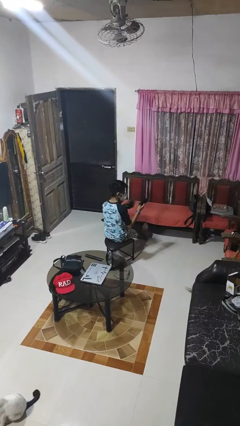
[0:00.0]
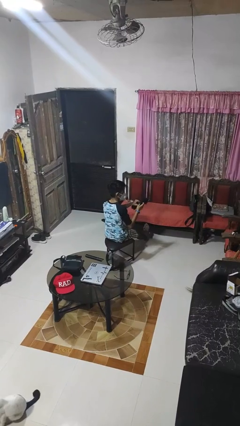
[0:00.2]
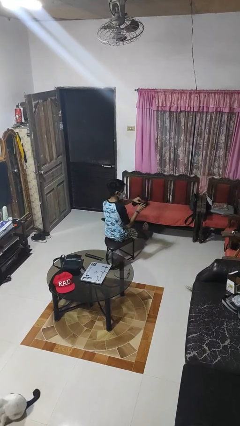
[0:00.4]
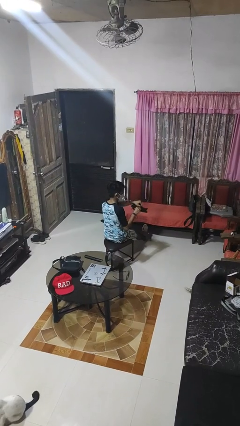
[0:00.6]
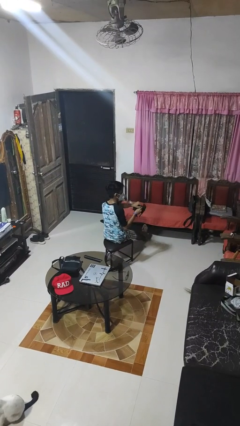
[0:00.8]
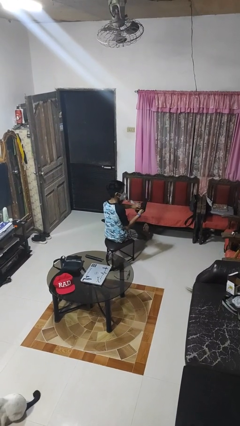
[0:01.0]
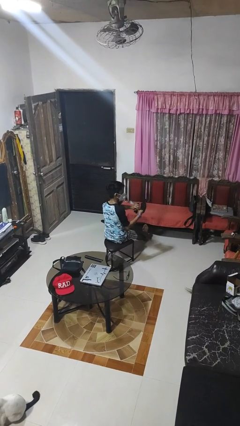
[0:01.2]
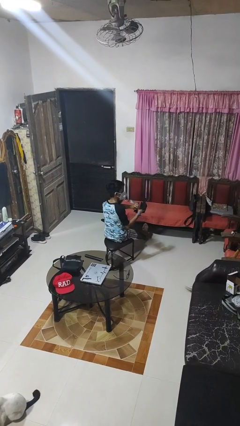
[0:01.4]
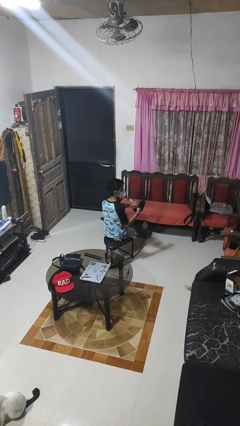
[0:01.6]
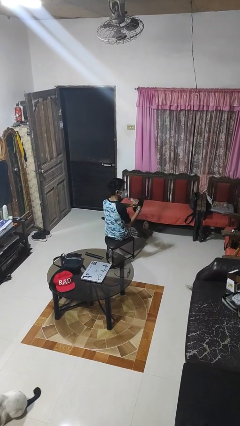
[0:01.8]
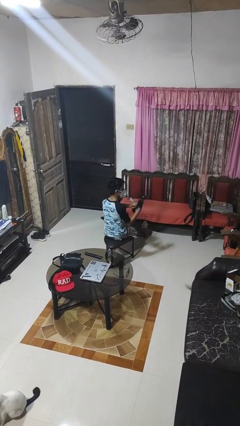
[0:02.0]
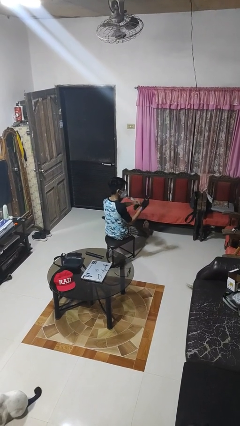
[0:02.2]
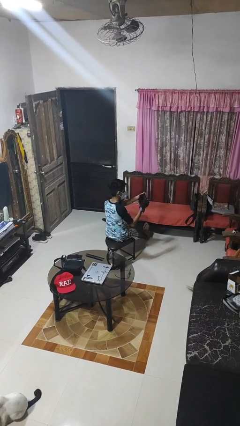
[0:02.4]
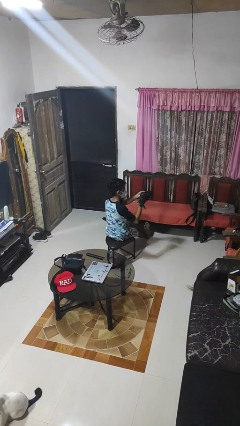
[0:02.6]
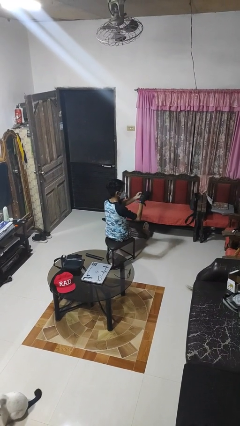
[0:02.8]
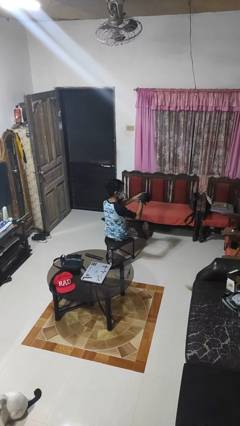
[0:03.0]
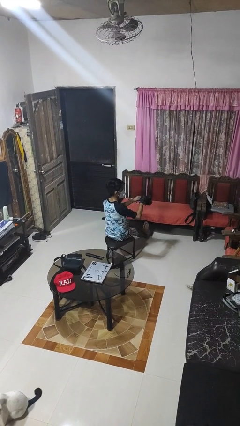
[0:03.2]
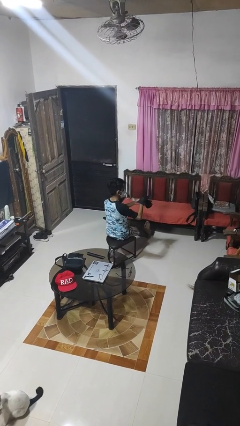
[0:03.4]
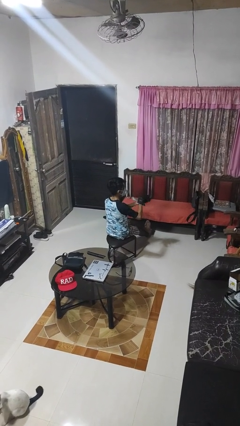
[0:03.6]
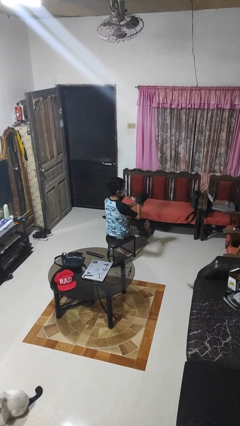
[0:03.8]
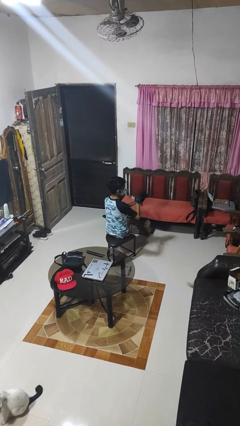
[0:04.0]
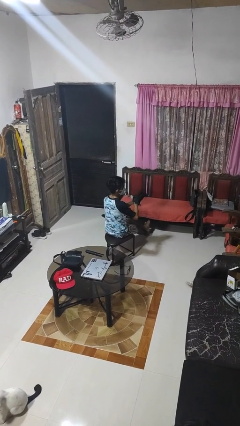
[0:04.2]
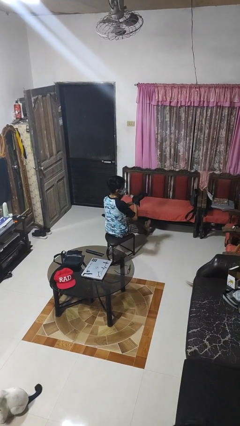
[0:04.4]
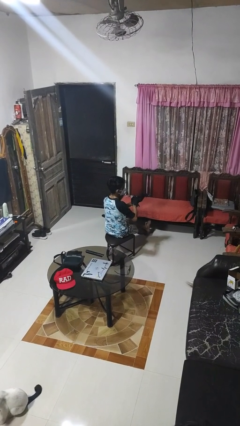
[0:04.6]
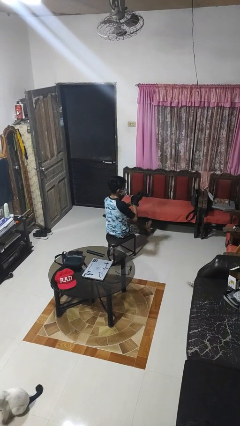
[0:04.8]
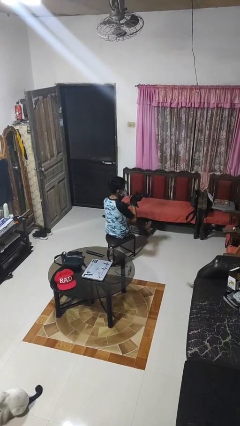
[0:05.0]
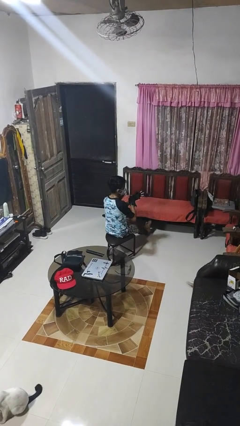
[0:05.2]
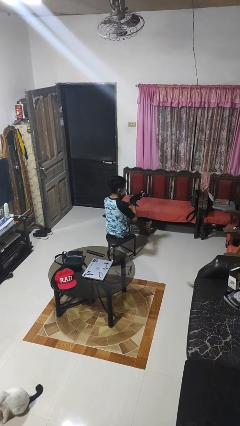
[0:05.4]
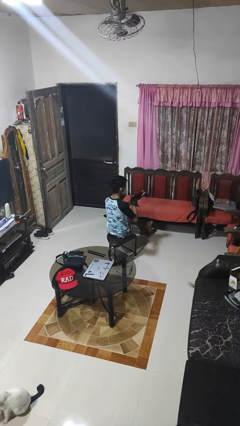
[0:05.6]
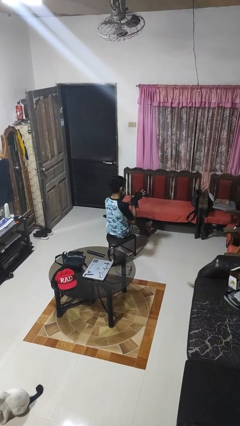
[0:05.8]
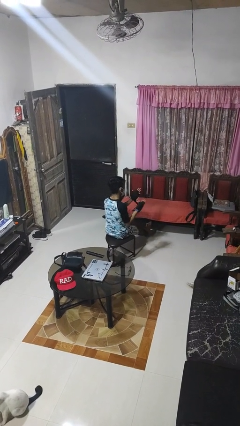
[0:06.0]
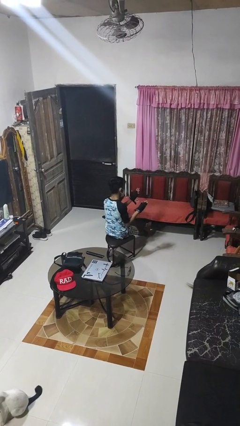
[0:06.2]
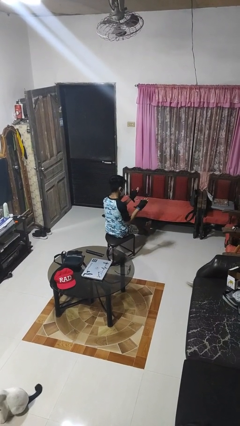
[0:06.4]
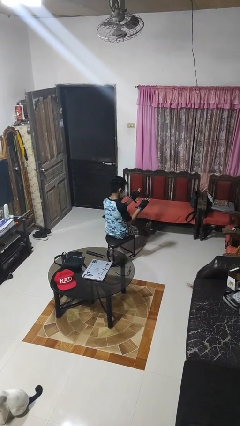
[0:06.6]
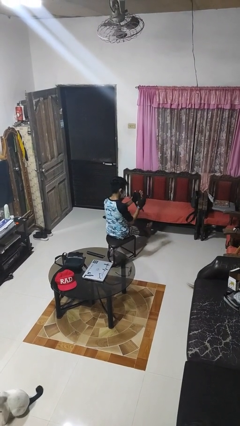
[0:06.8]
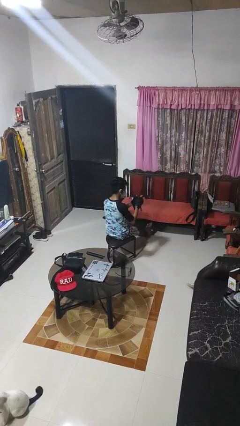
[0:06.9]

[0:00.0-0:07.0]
person puts on gloves

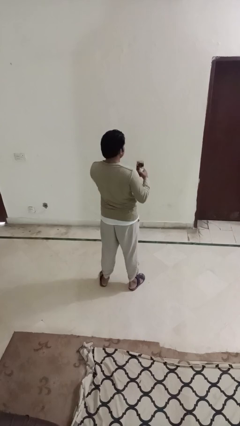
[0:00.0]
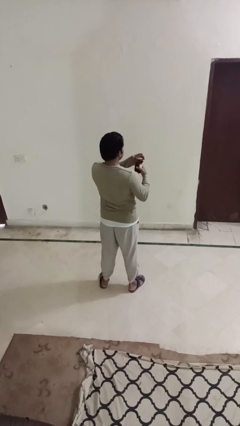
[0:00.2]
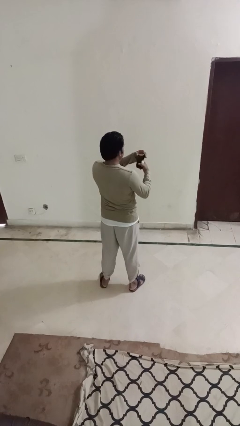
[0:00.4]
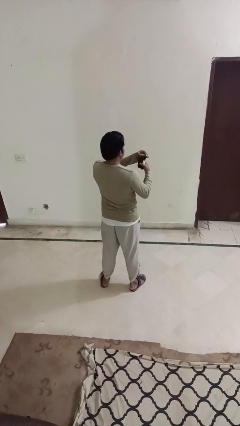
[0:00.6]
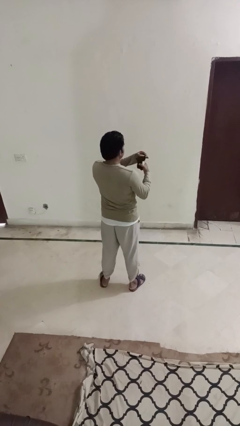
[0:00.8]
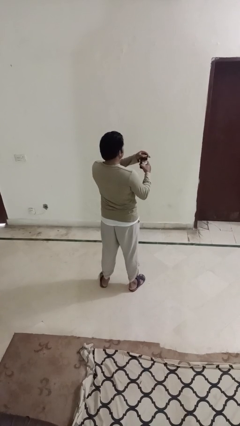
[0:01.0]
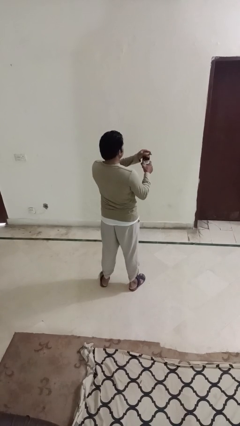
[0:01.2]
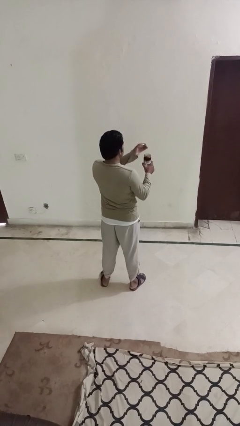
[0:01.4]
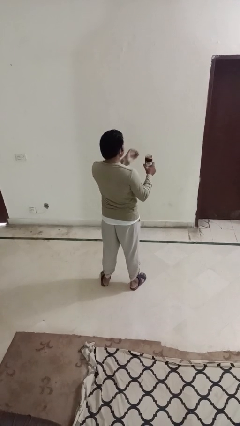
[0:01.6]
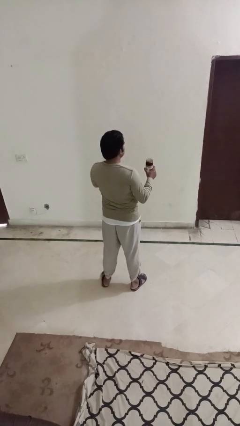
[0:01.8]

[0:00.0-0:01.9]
person opens jar

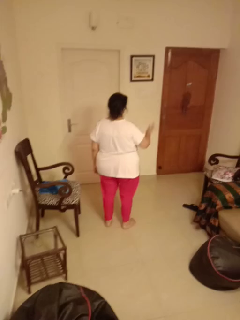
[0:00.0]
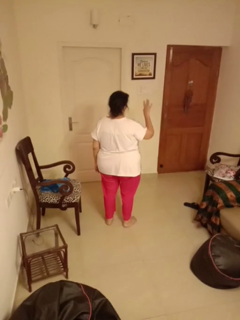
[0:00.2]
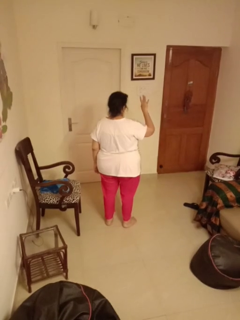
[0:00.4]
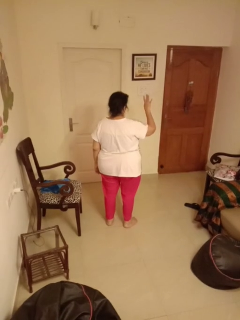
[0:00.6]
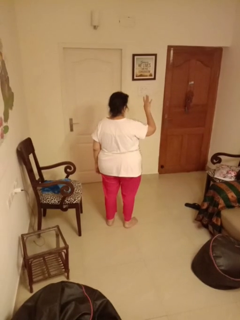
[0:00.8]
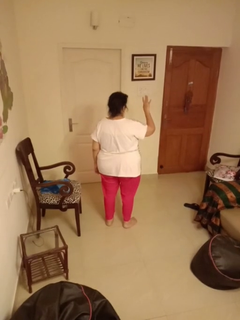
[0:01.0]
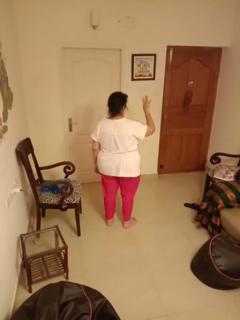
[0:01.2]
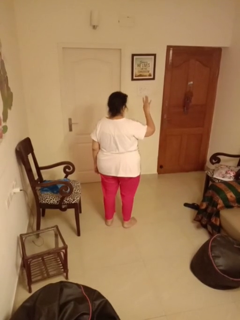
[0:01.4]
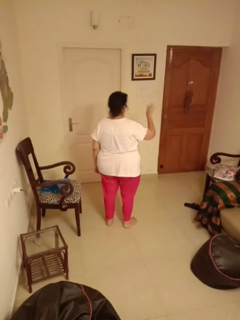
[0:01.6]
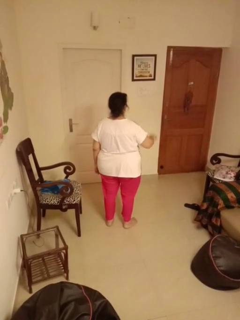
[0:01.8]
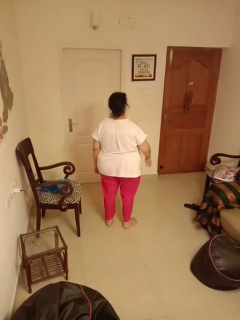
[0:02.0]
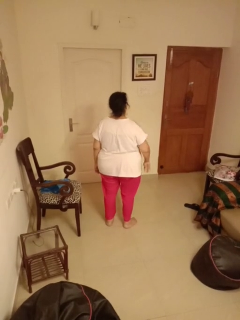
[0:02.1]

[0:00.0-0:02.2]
person gestures number four

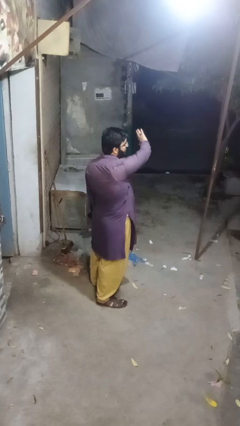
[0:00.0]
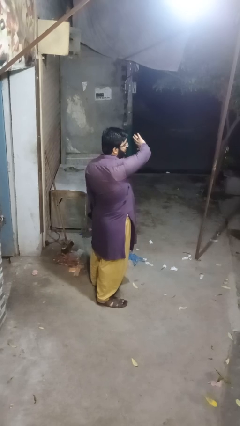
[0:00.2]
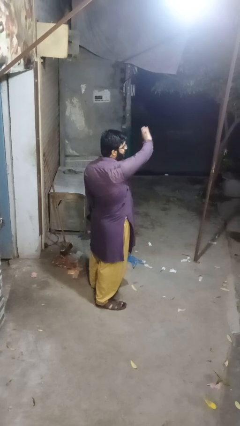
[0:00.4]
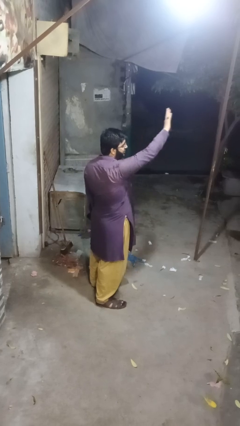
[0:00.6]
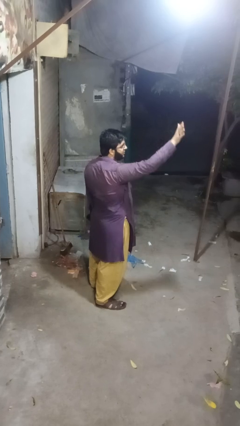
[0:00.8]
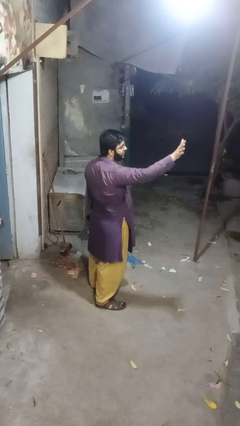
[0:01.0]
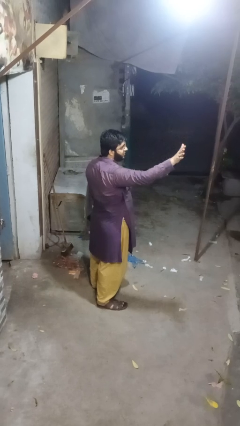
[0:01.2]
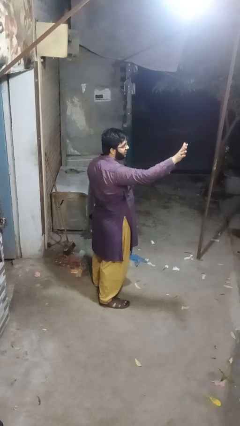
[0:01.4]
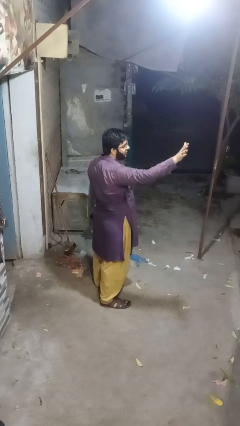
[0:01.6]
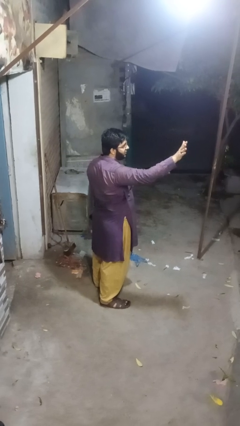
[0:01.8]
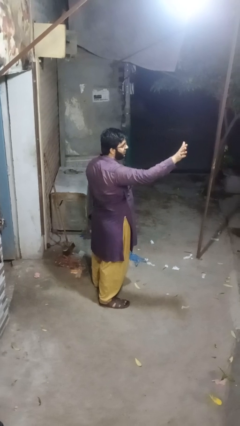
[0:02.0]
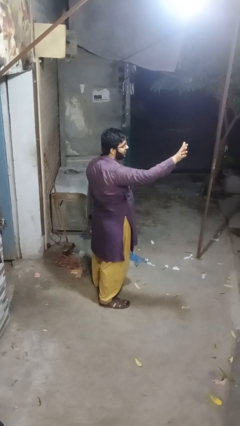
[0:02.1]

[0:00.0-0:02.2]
person gestures swipe right

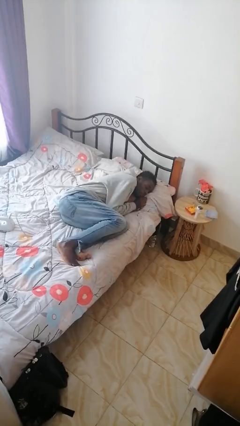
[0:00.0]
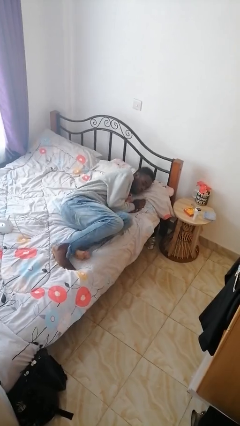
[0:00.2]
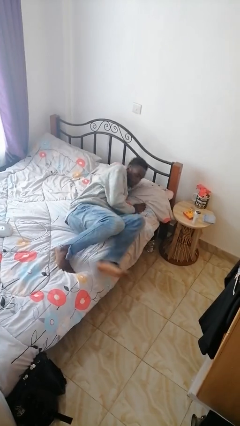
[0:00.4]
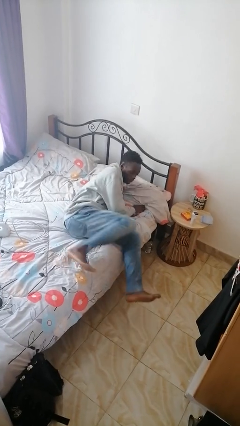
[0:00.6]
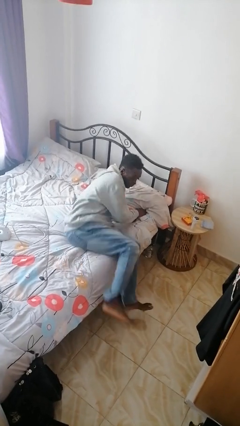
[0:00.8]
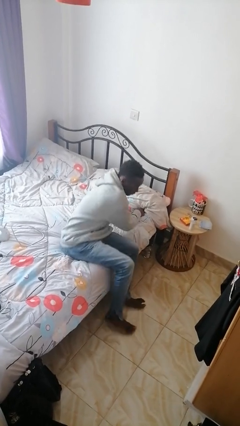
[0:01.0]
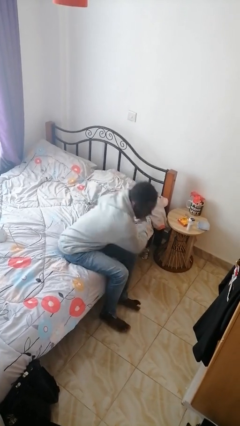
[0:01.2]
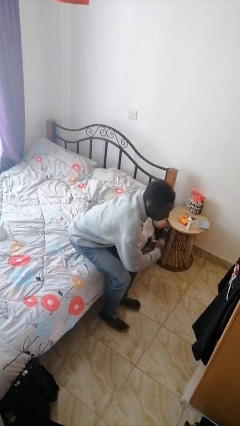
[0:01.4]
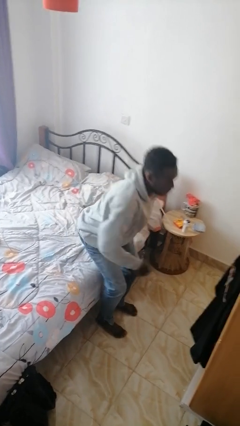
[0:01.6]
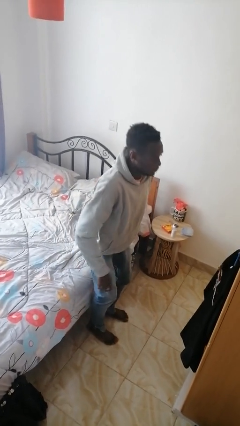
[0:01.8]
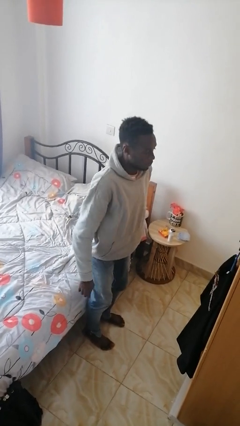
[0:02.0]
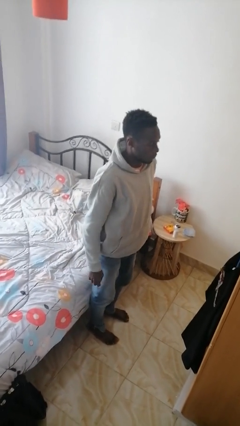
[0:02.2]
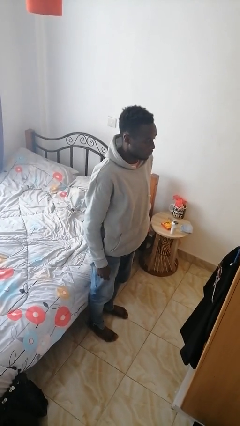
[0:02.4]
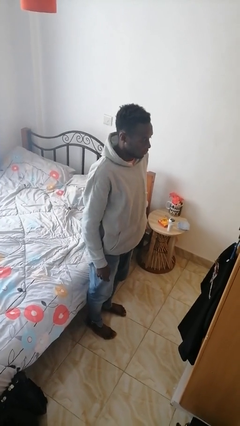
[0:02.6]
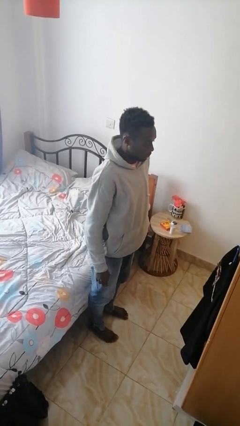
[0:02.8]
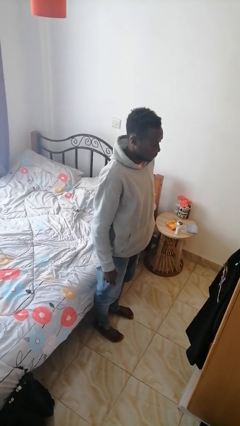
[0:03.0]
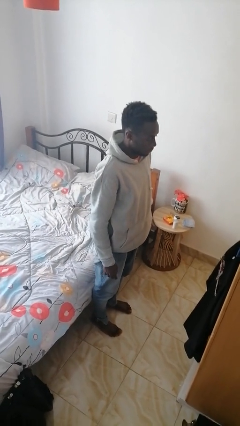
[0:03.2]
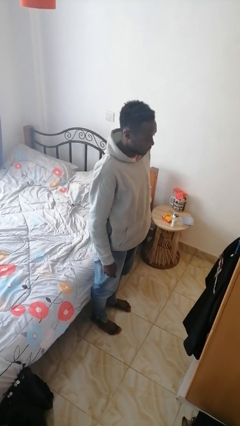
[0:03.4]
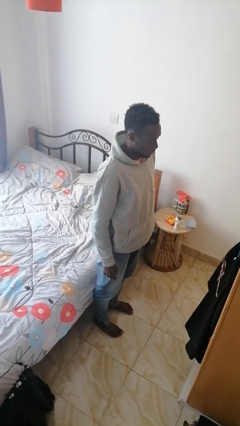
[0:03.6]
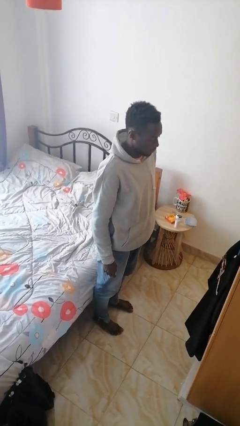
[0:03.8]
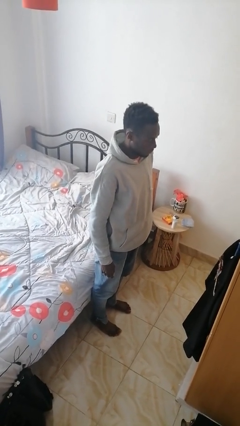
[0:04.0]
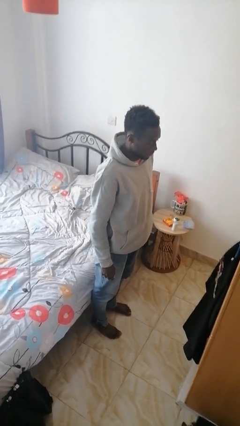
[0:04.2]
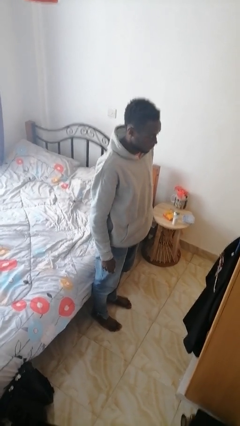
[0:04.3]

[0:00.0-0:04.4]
person stands up

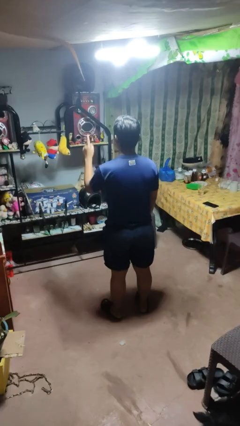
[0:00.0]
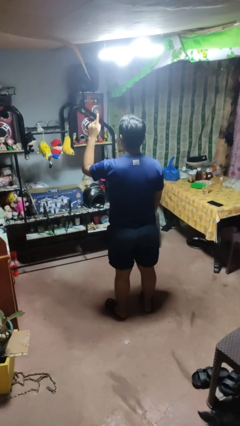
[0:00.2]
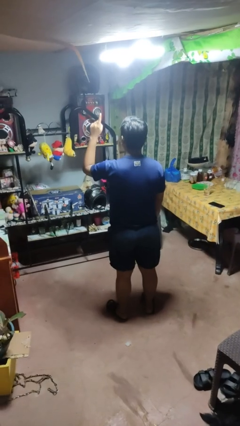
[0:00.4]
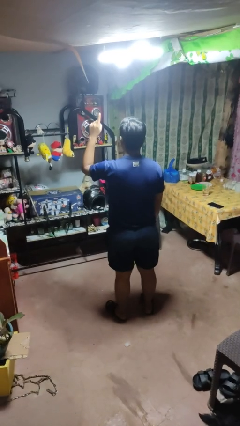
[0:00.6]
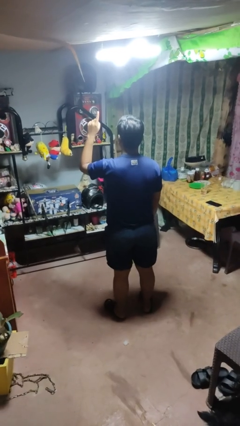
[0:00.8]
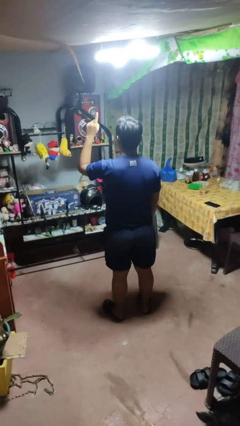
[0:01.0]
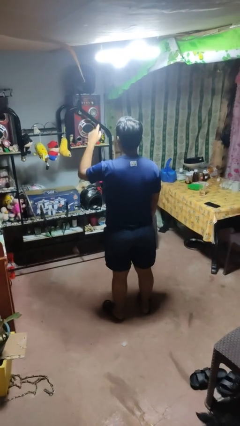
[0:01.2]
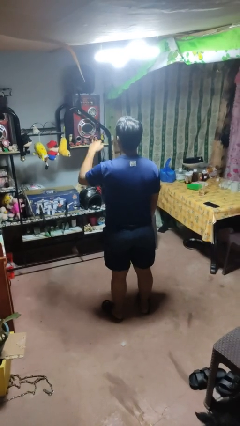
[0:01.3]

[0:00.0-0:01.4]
person gestures number one
